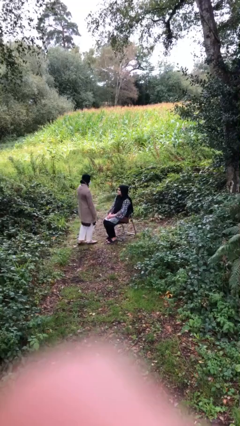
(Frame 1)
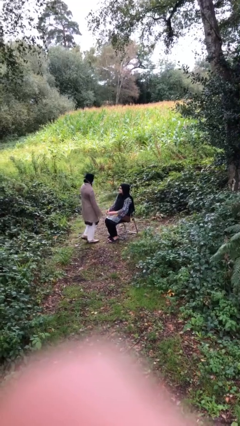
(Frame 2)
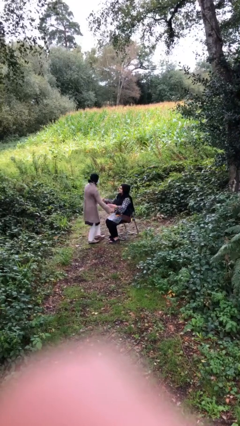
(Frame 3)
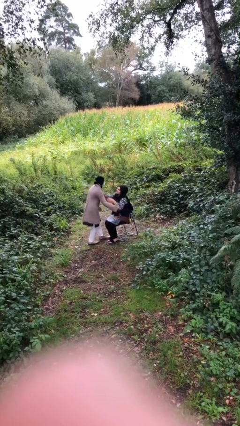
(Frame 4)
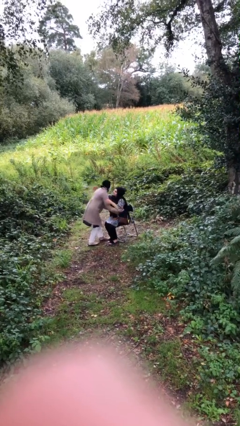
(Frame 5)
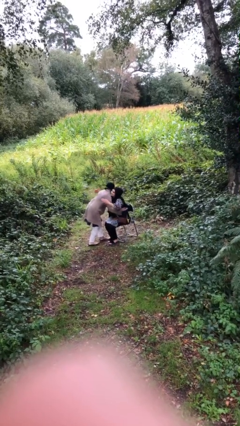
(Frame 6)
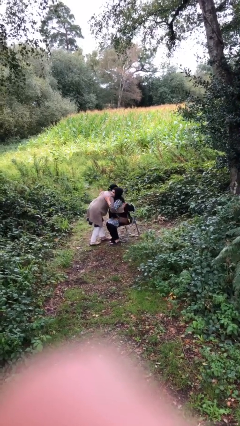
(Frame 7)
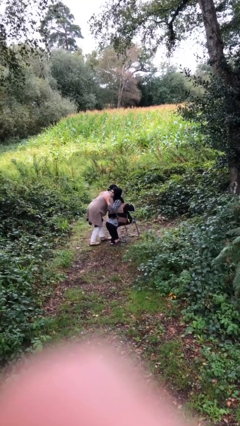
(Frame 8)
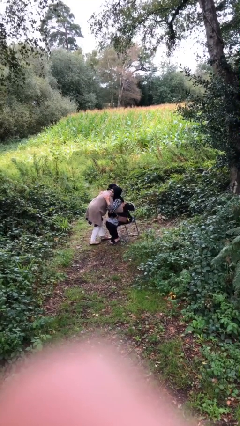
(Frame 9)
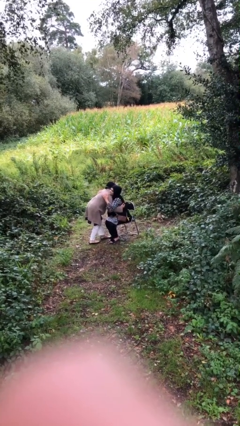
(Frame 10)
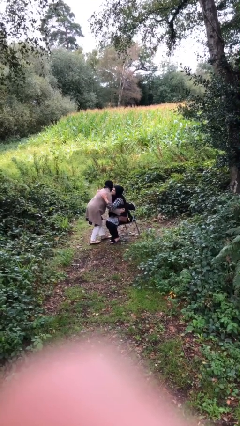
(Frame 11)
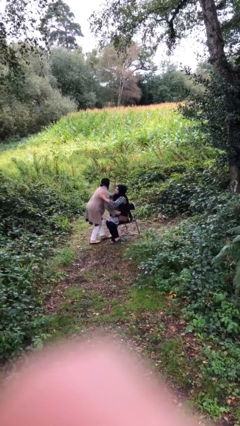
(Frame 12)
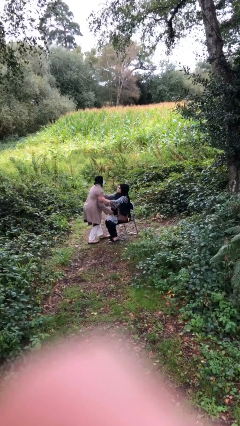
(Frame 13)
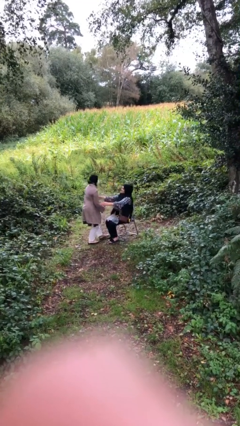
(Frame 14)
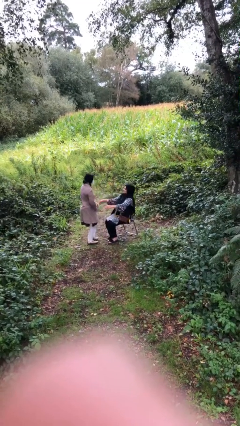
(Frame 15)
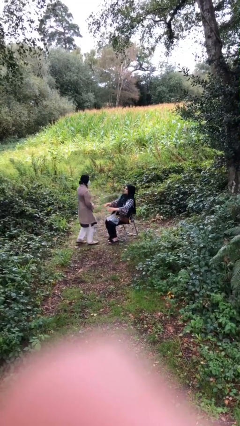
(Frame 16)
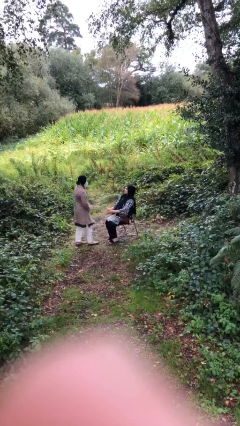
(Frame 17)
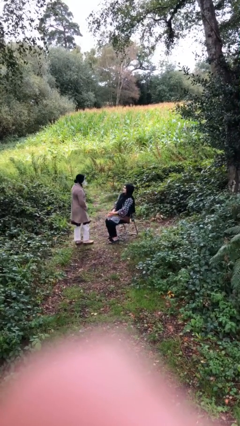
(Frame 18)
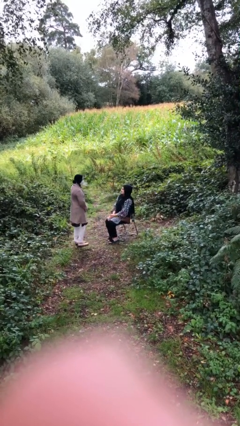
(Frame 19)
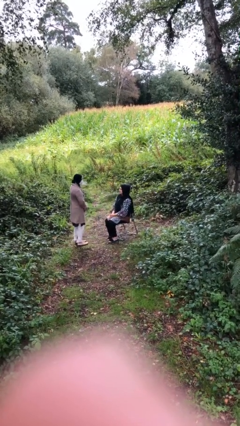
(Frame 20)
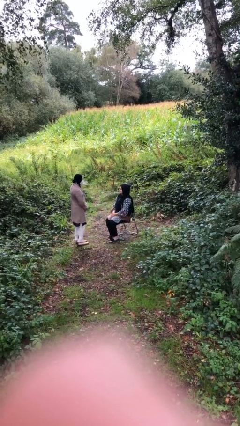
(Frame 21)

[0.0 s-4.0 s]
person embraces person

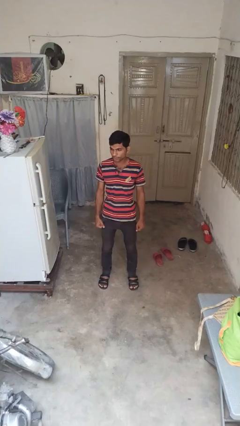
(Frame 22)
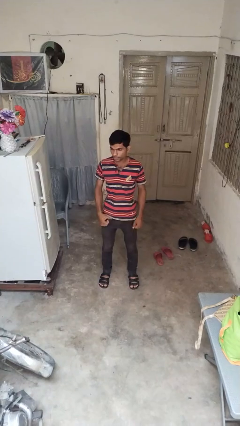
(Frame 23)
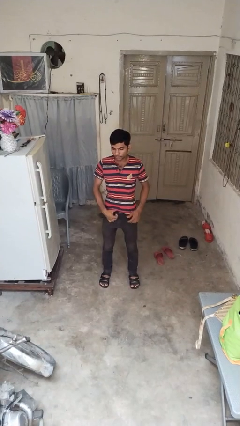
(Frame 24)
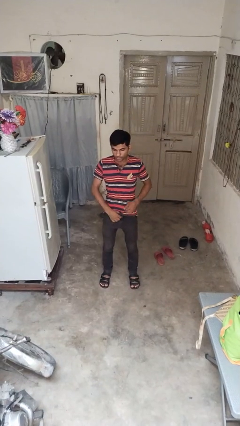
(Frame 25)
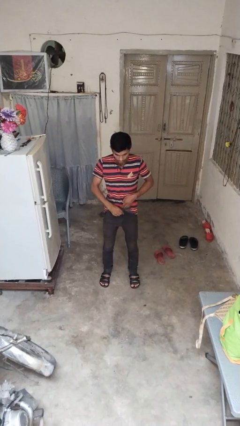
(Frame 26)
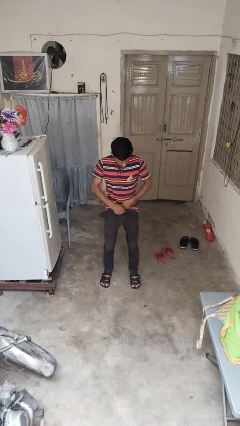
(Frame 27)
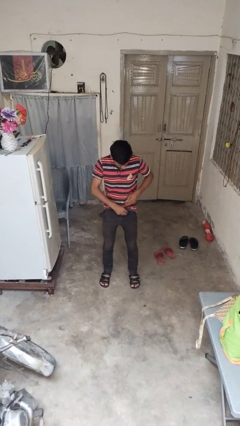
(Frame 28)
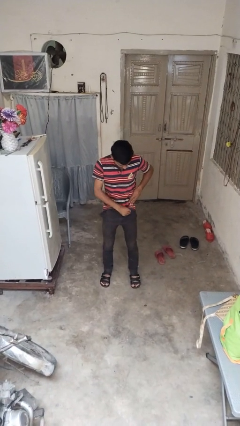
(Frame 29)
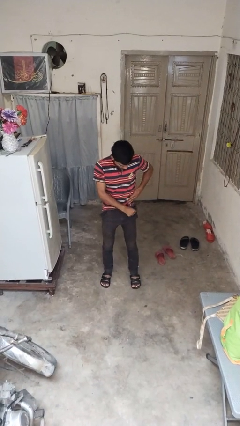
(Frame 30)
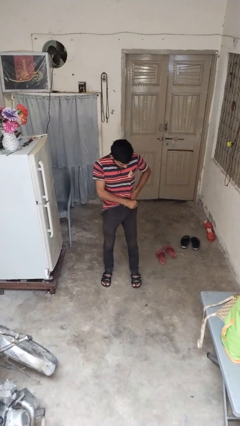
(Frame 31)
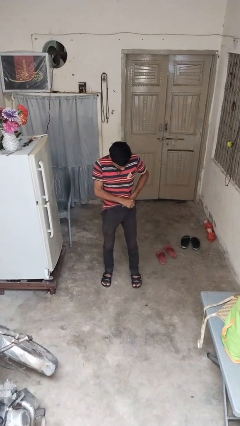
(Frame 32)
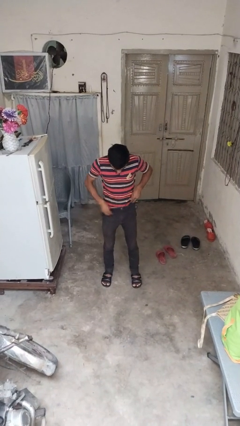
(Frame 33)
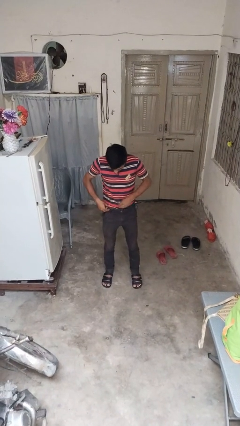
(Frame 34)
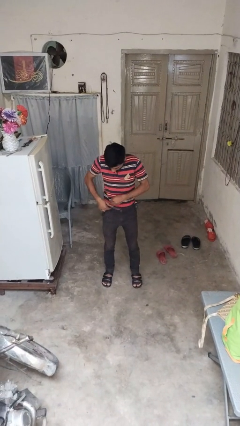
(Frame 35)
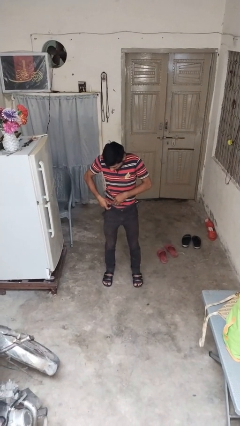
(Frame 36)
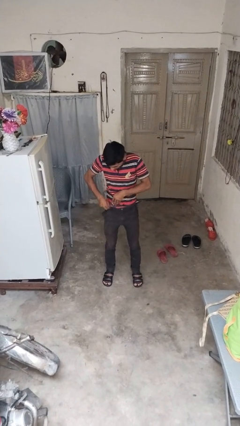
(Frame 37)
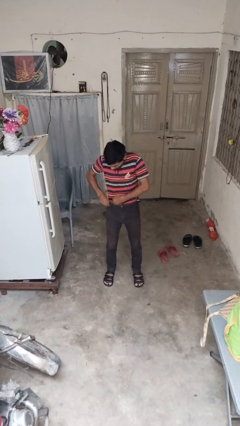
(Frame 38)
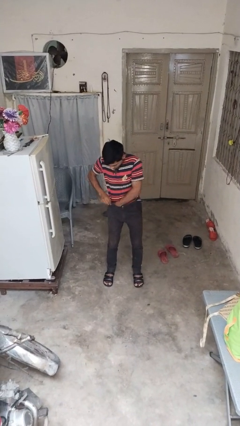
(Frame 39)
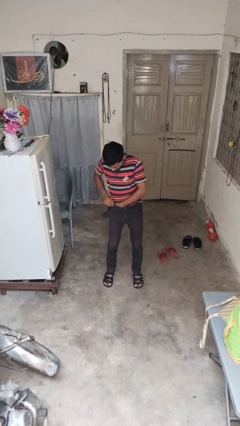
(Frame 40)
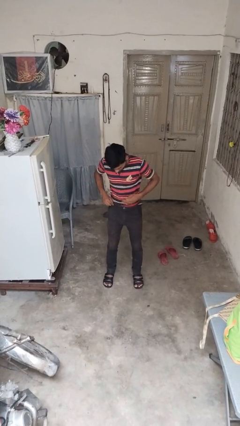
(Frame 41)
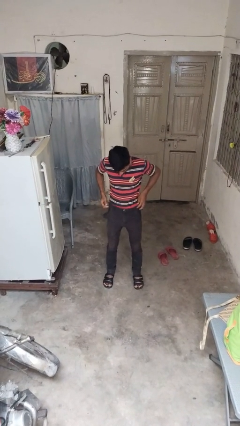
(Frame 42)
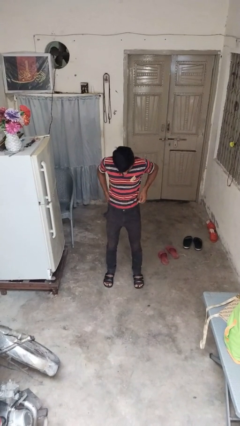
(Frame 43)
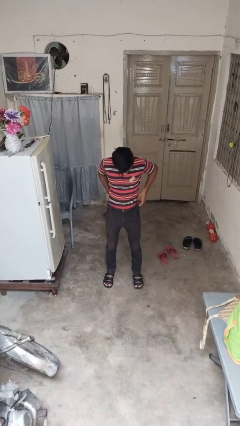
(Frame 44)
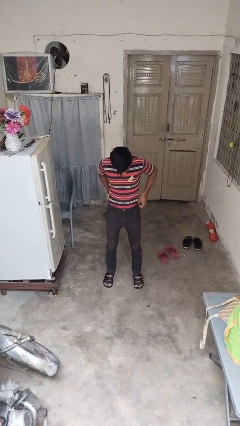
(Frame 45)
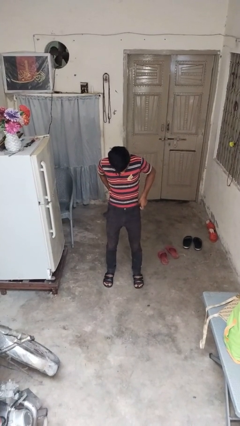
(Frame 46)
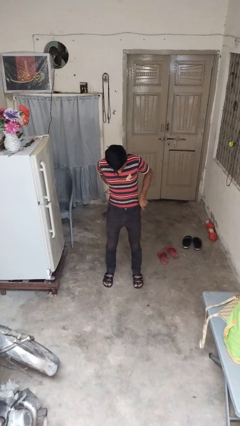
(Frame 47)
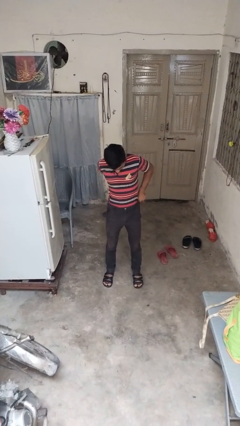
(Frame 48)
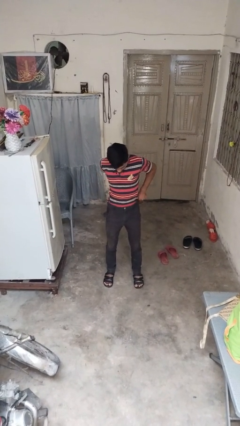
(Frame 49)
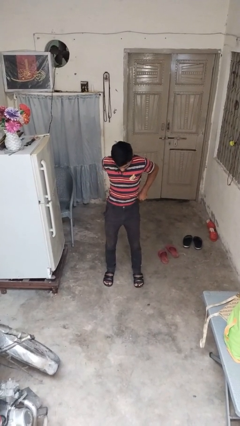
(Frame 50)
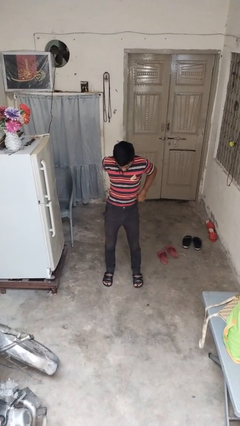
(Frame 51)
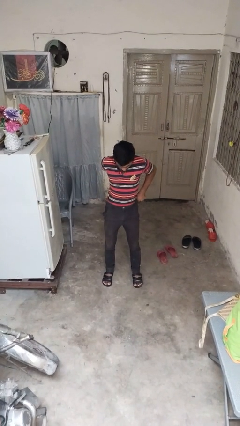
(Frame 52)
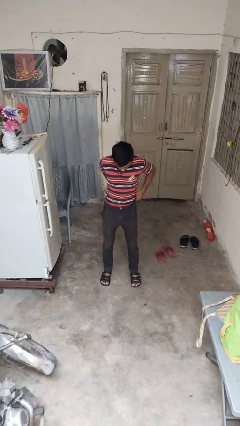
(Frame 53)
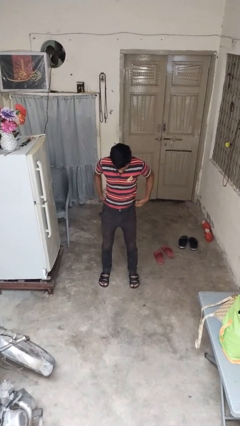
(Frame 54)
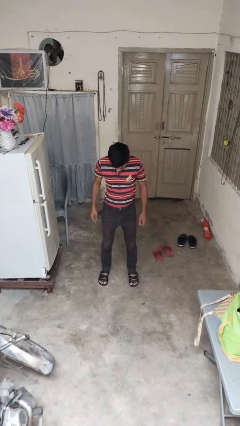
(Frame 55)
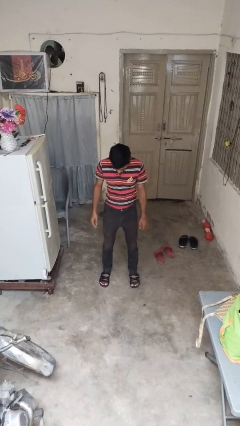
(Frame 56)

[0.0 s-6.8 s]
person tucks in shirt

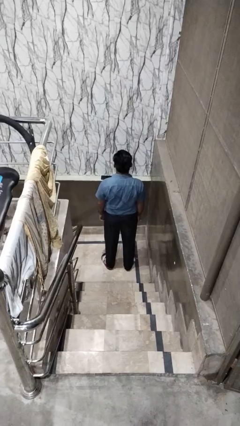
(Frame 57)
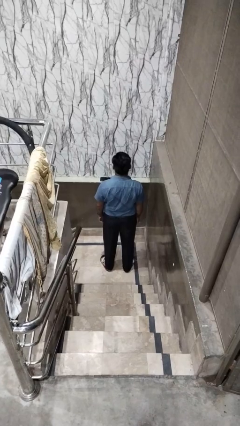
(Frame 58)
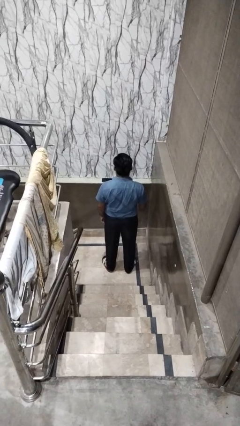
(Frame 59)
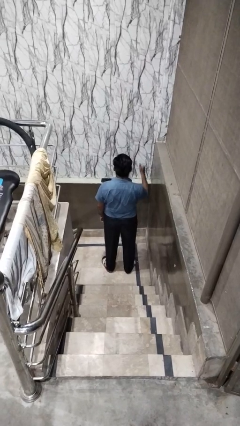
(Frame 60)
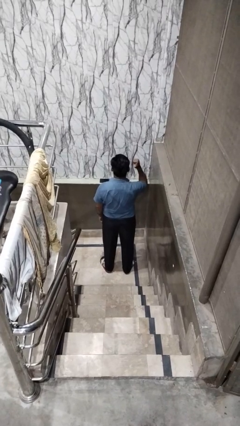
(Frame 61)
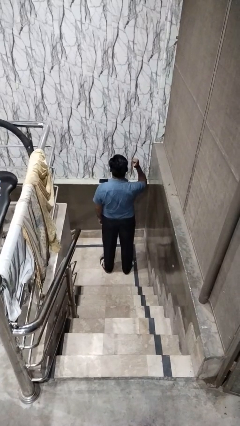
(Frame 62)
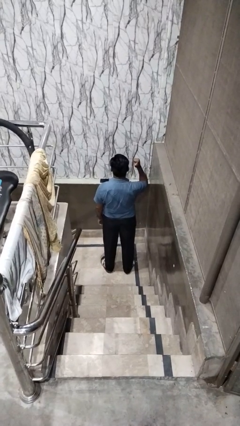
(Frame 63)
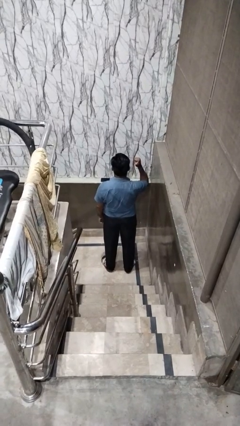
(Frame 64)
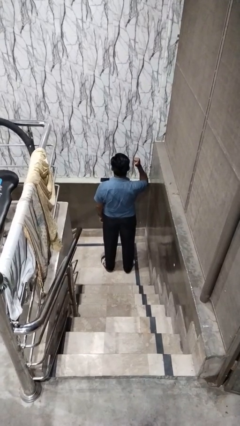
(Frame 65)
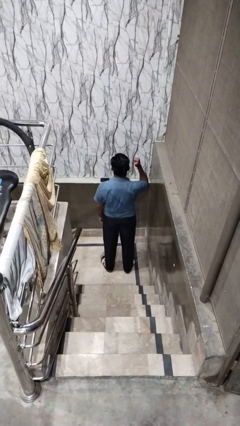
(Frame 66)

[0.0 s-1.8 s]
person gestures behind me

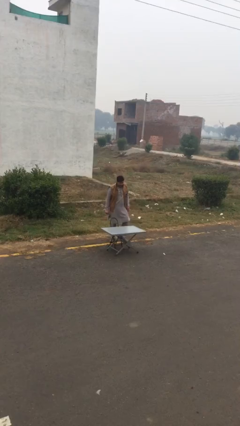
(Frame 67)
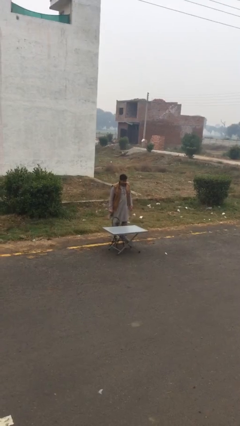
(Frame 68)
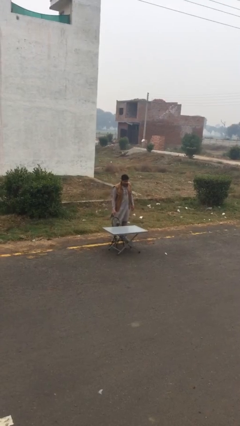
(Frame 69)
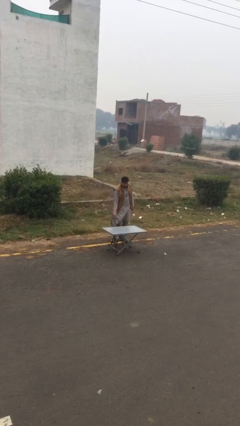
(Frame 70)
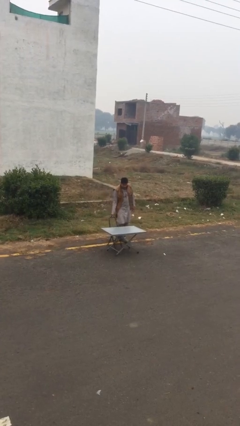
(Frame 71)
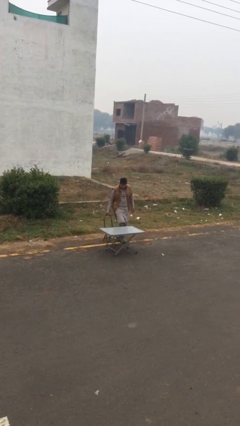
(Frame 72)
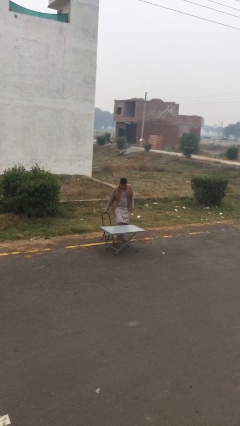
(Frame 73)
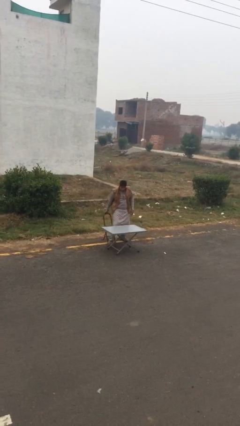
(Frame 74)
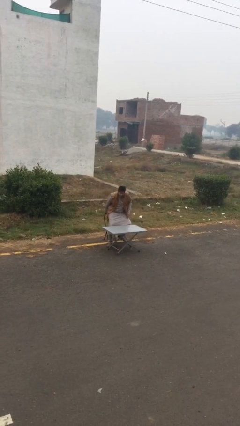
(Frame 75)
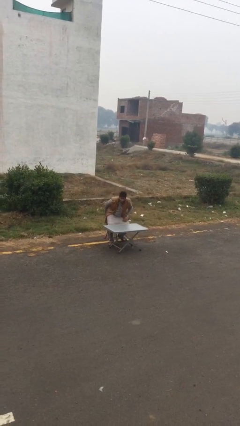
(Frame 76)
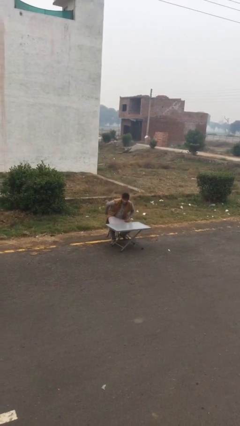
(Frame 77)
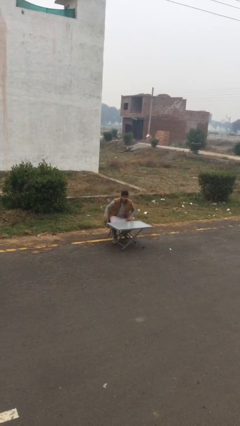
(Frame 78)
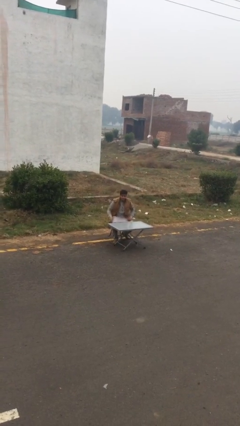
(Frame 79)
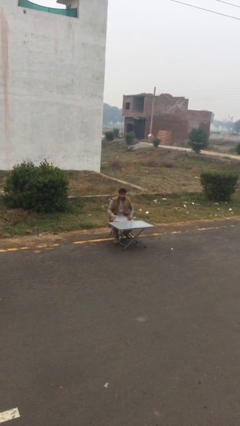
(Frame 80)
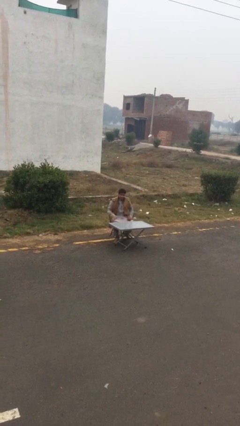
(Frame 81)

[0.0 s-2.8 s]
person sits down

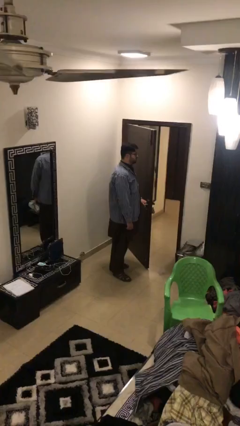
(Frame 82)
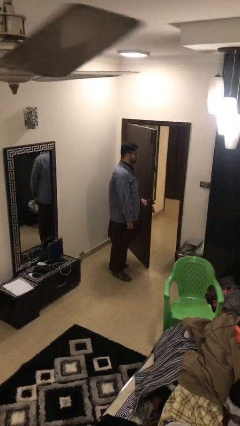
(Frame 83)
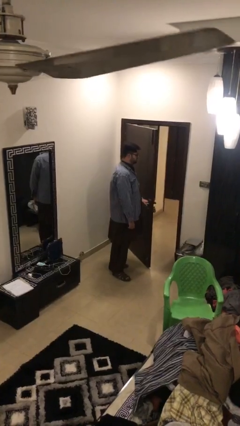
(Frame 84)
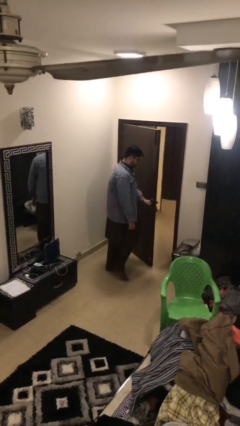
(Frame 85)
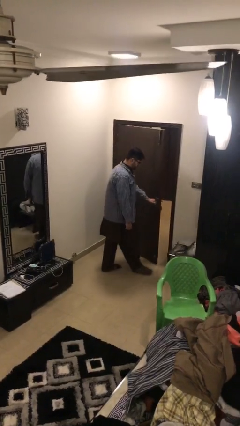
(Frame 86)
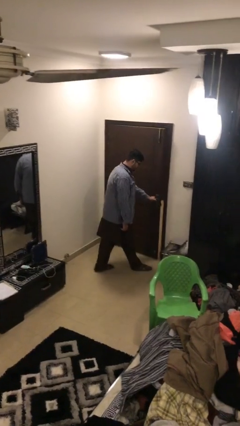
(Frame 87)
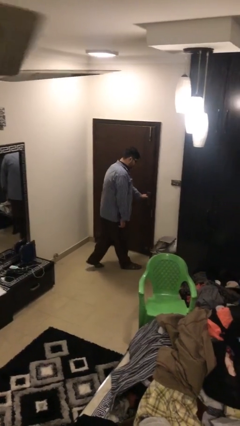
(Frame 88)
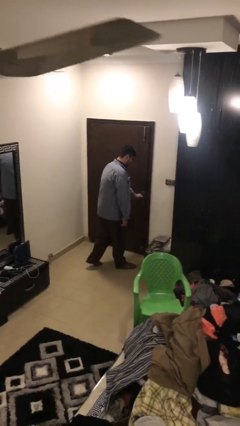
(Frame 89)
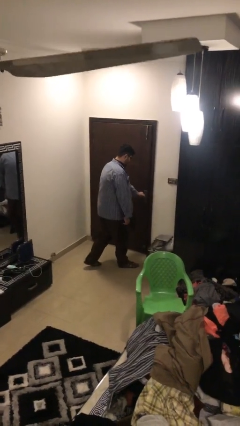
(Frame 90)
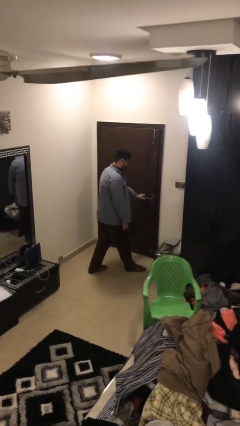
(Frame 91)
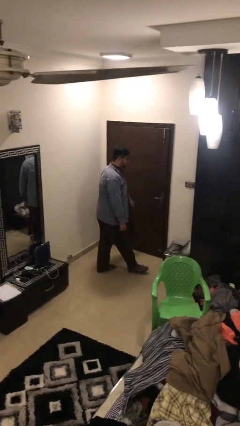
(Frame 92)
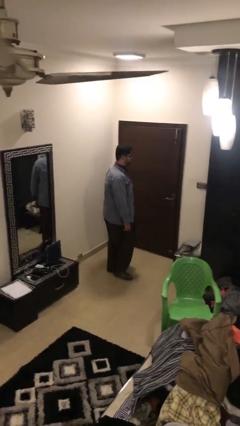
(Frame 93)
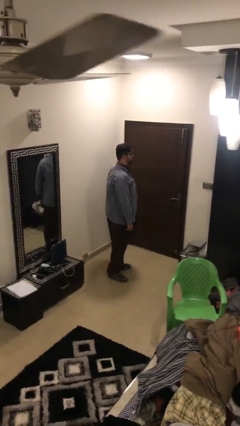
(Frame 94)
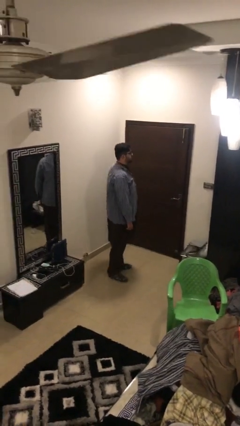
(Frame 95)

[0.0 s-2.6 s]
person closes facility door
